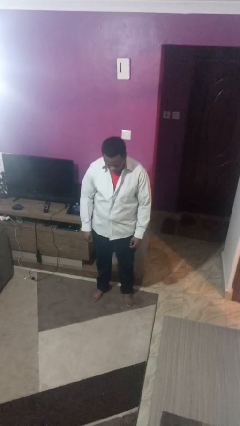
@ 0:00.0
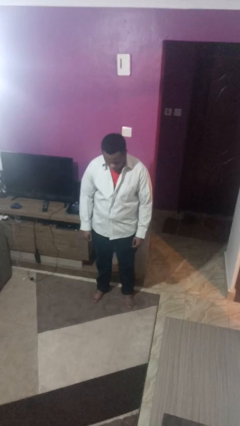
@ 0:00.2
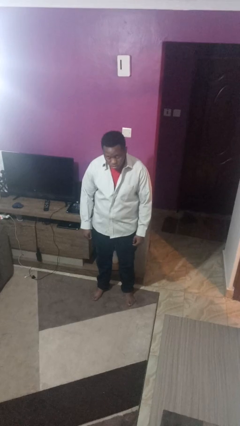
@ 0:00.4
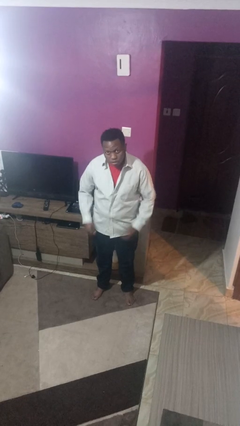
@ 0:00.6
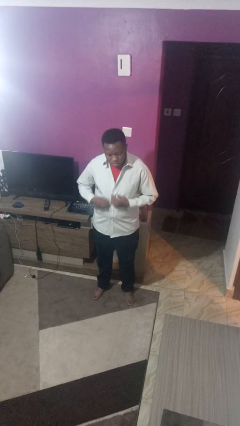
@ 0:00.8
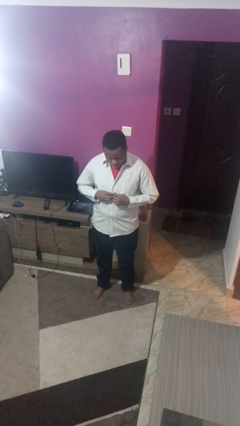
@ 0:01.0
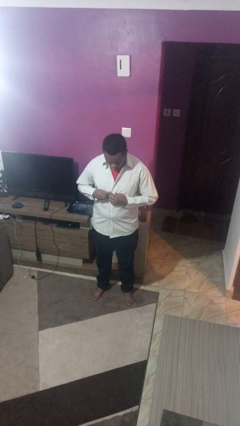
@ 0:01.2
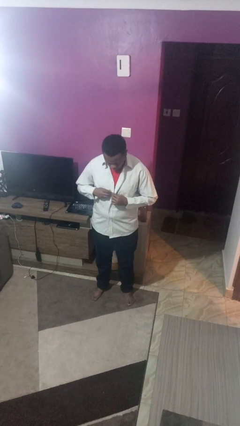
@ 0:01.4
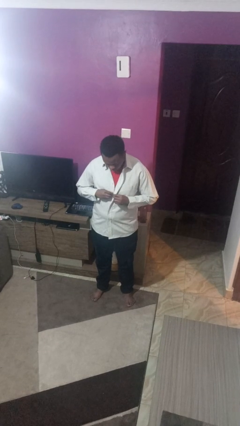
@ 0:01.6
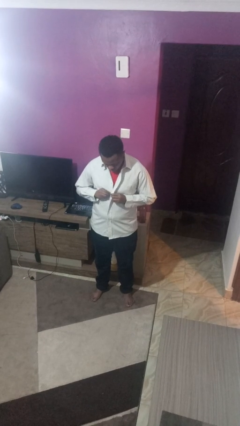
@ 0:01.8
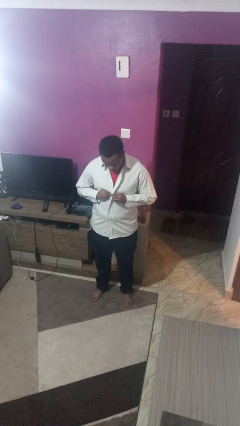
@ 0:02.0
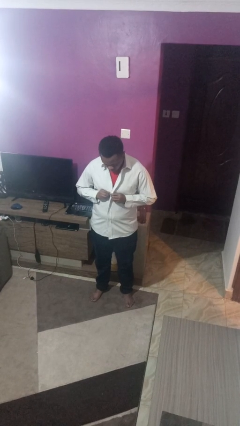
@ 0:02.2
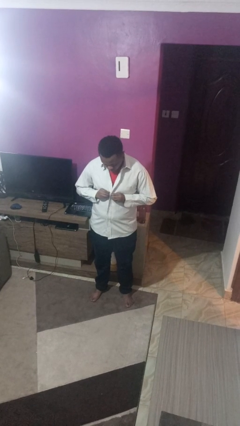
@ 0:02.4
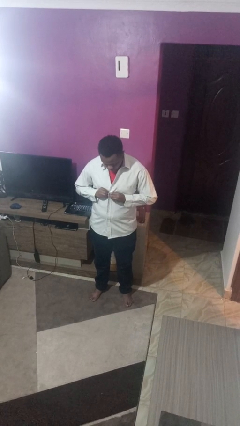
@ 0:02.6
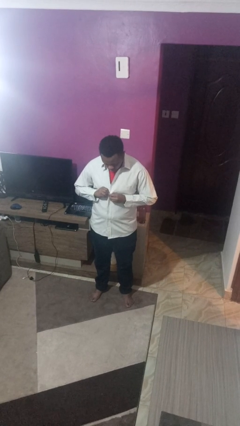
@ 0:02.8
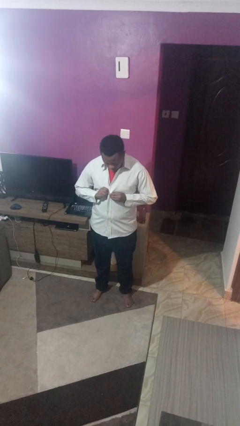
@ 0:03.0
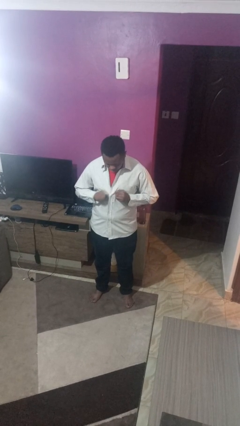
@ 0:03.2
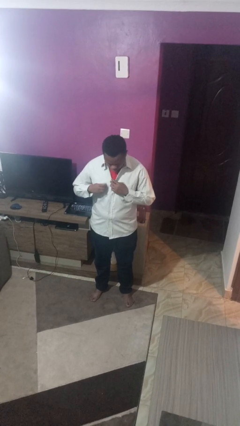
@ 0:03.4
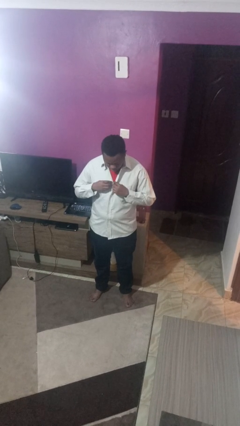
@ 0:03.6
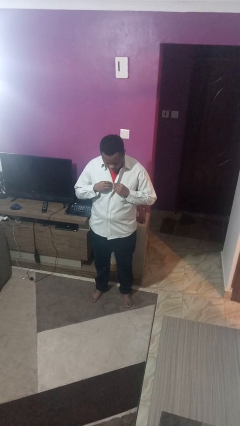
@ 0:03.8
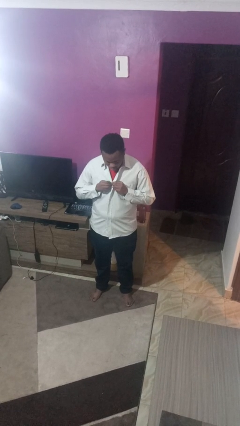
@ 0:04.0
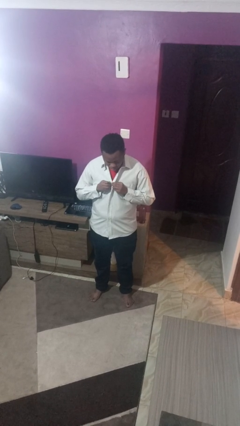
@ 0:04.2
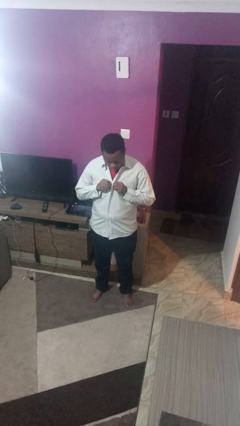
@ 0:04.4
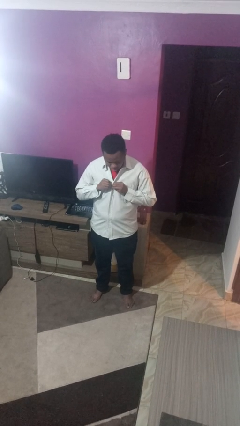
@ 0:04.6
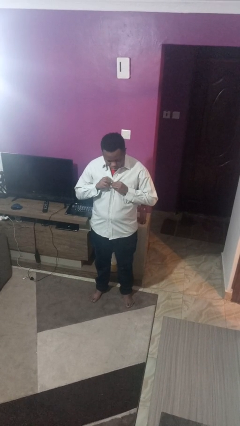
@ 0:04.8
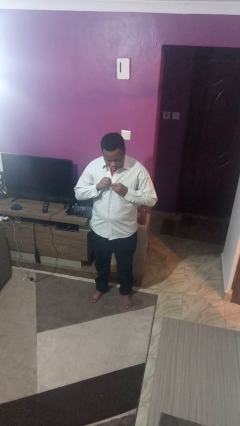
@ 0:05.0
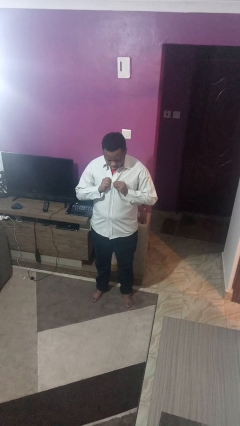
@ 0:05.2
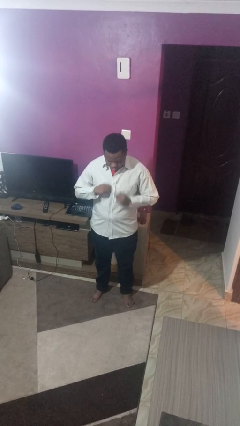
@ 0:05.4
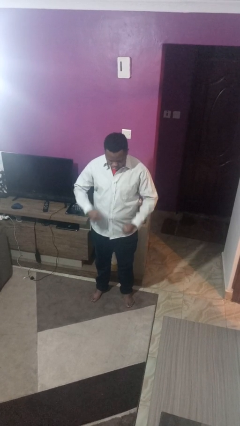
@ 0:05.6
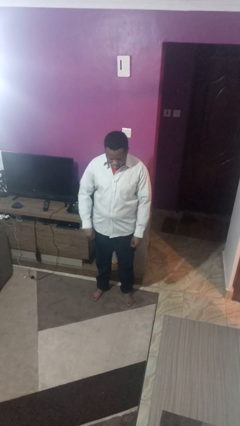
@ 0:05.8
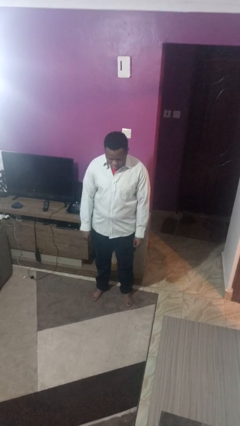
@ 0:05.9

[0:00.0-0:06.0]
person buttons shirt

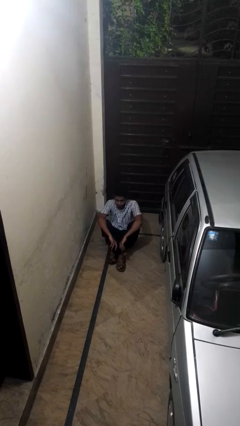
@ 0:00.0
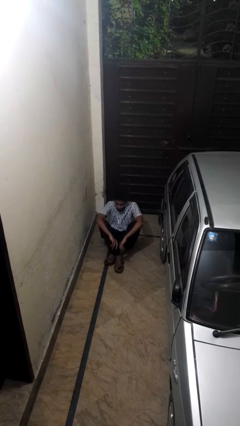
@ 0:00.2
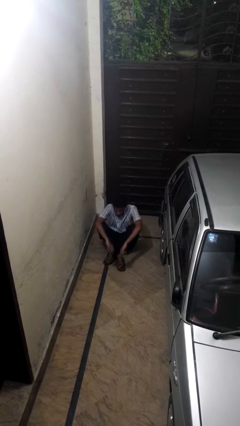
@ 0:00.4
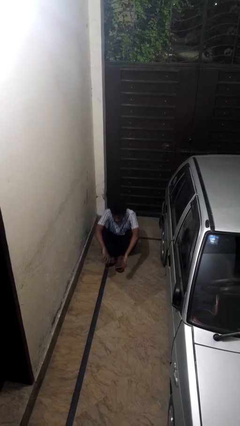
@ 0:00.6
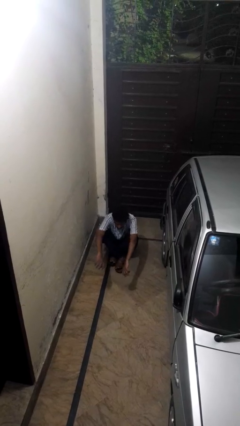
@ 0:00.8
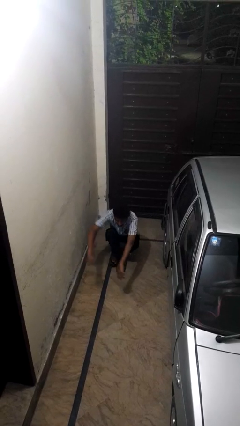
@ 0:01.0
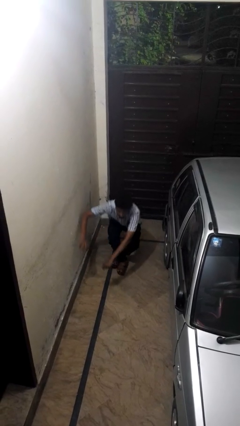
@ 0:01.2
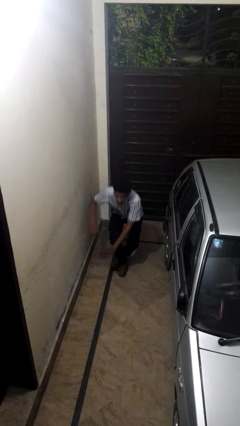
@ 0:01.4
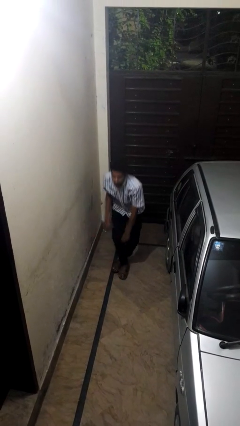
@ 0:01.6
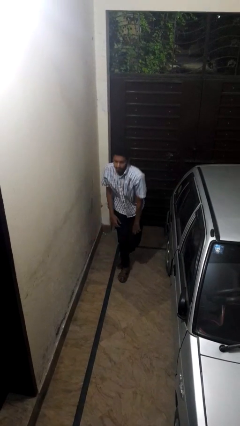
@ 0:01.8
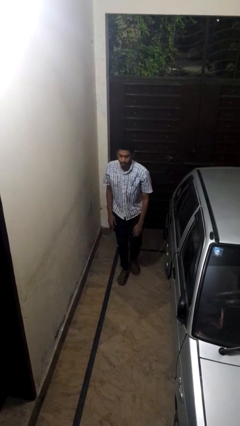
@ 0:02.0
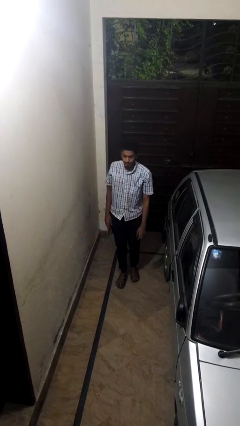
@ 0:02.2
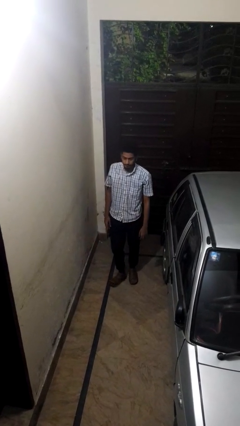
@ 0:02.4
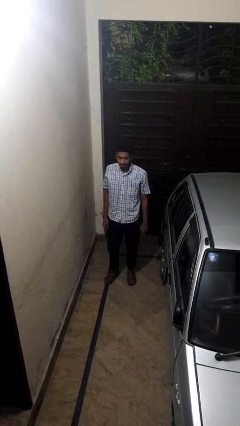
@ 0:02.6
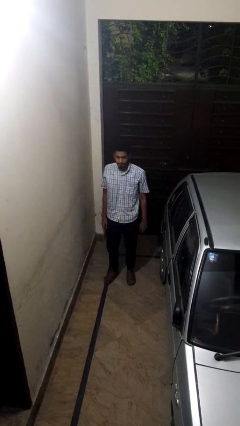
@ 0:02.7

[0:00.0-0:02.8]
person stands up from floor

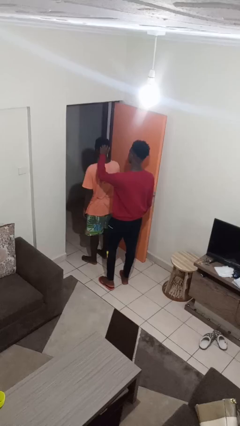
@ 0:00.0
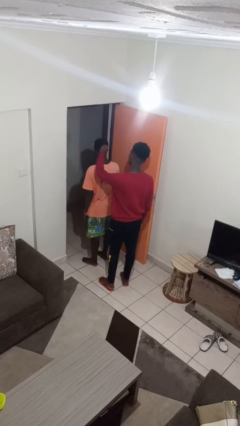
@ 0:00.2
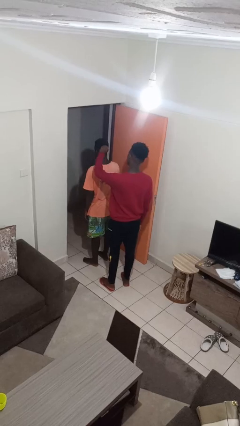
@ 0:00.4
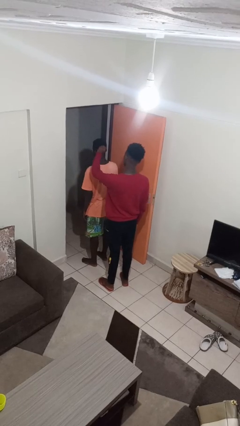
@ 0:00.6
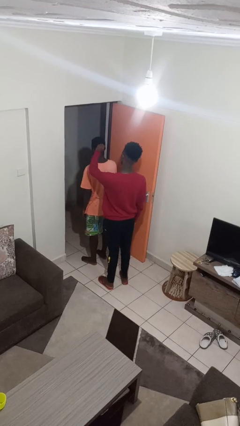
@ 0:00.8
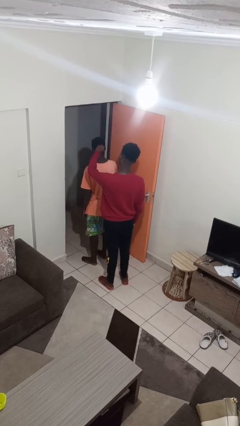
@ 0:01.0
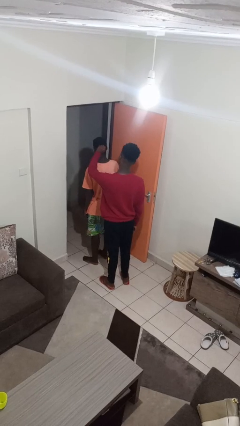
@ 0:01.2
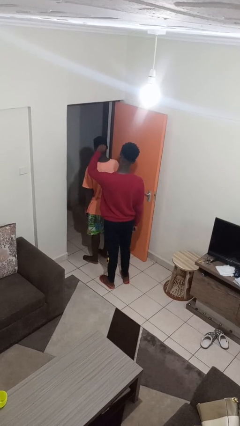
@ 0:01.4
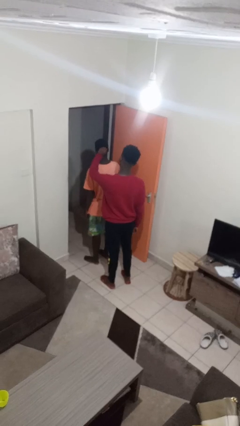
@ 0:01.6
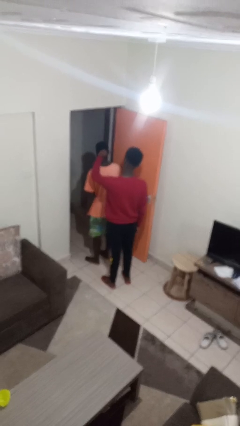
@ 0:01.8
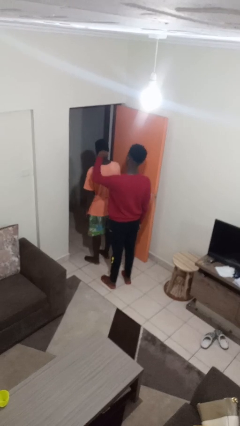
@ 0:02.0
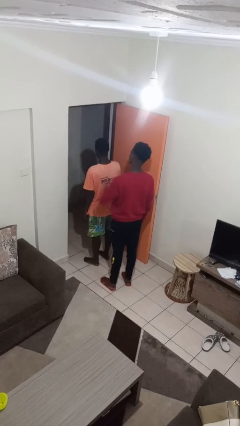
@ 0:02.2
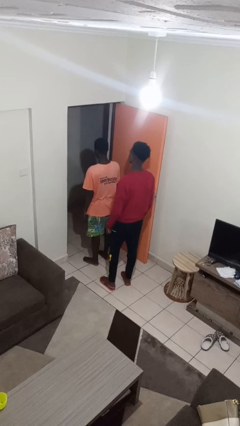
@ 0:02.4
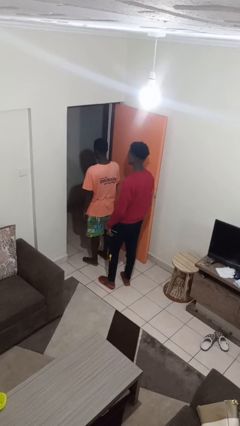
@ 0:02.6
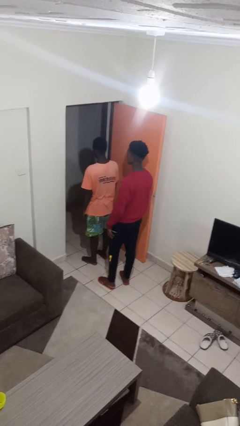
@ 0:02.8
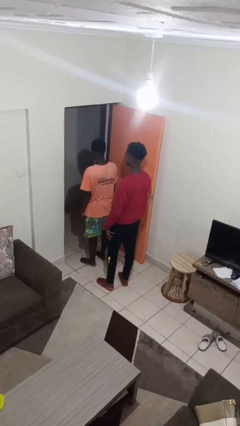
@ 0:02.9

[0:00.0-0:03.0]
person grabs person by hair

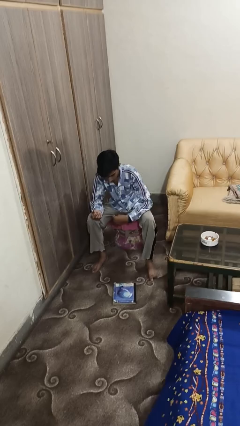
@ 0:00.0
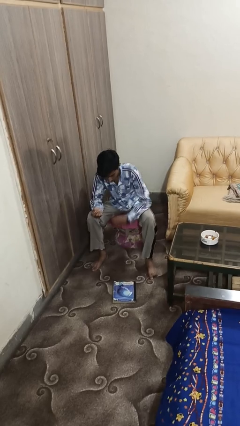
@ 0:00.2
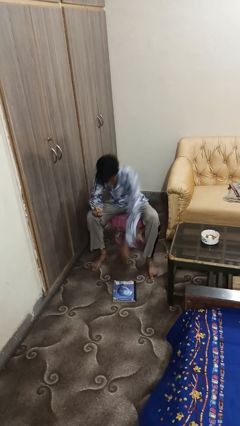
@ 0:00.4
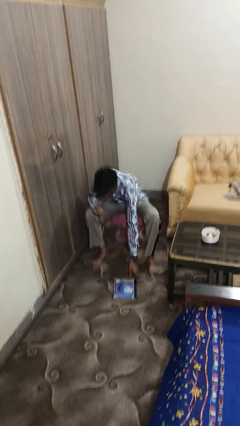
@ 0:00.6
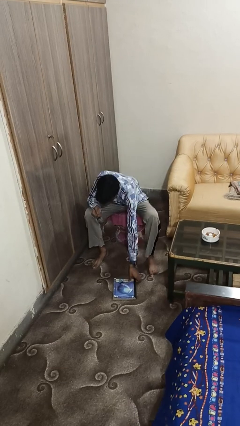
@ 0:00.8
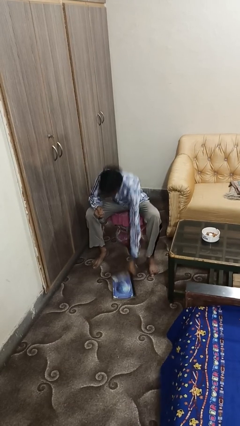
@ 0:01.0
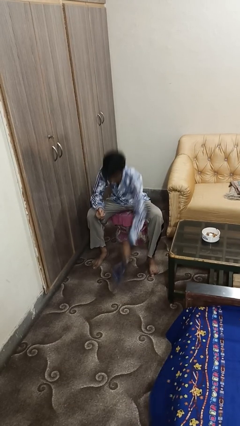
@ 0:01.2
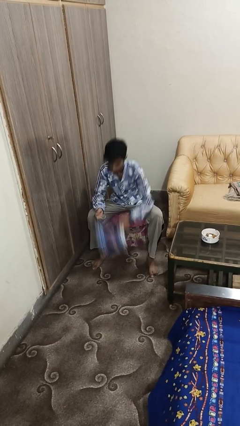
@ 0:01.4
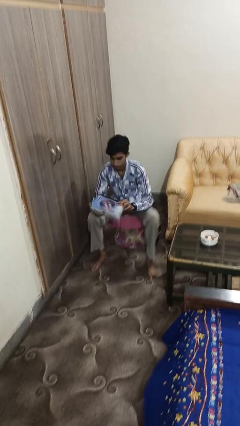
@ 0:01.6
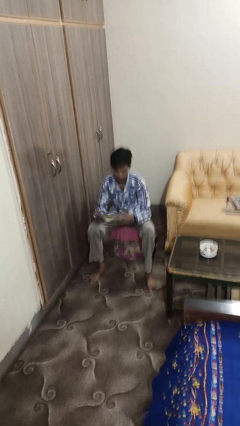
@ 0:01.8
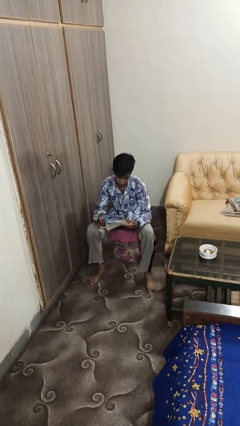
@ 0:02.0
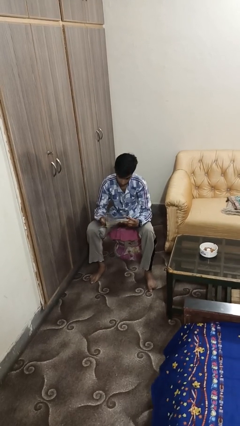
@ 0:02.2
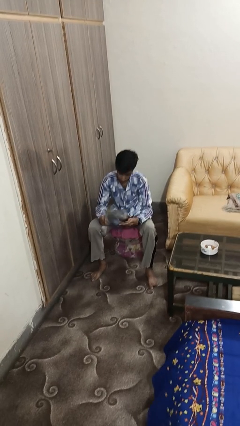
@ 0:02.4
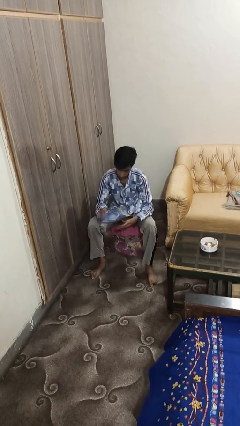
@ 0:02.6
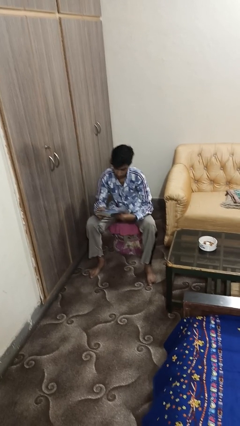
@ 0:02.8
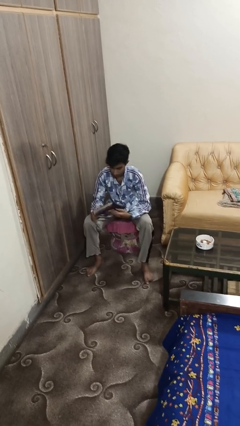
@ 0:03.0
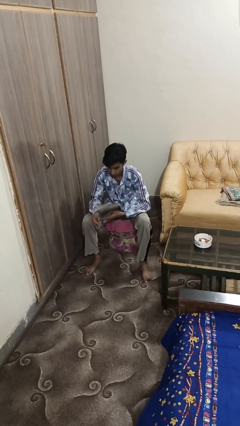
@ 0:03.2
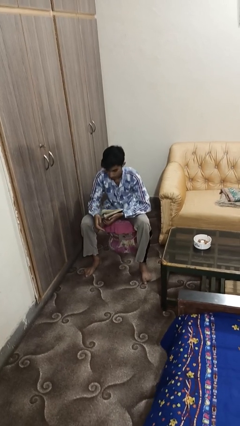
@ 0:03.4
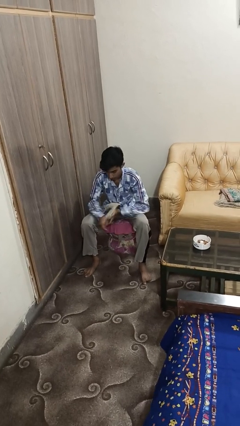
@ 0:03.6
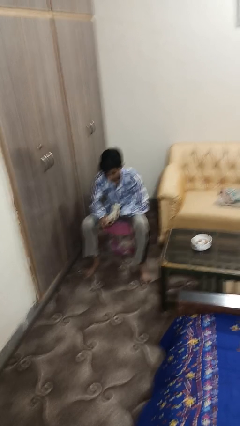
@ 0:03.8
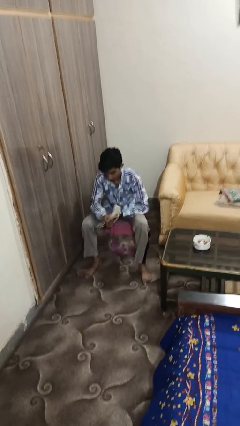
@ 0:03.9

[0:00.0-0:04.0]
person picks up object from floor

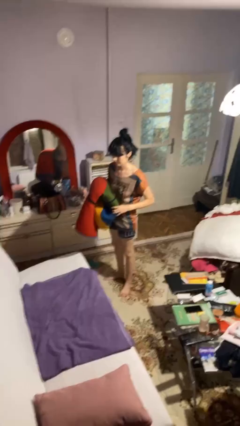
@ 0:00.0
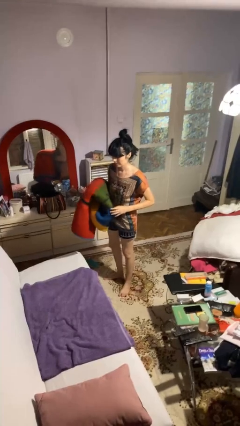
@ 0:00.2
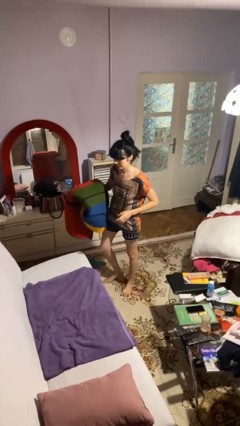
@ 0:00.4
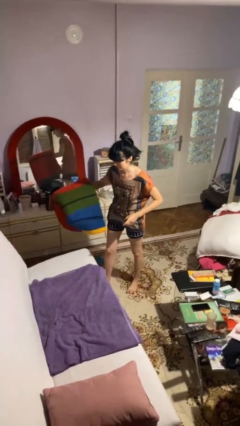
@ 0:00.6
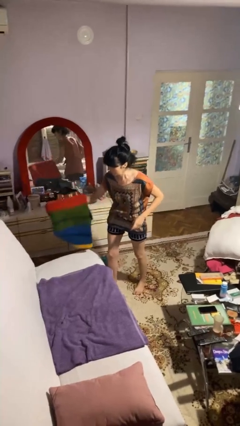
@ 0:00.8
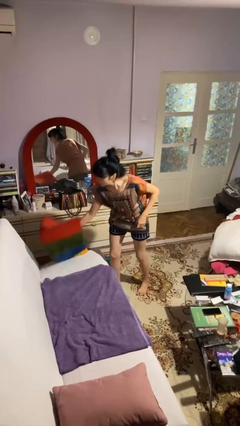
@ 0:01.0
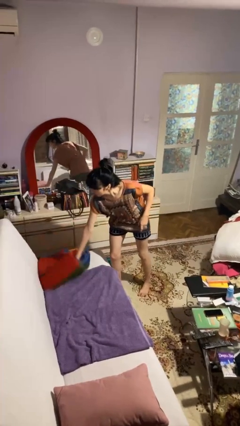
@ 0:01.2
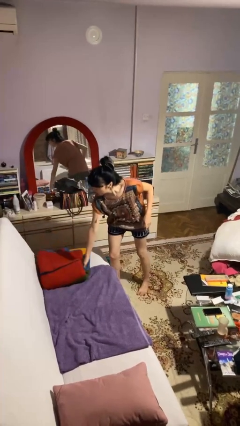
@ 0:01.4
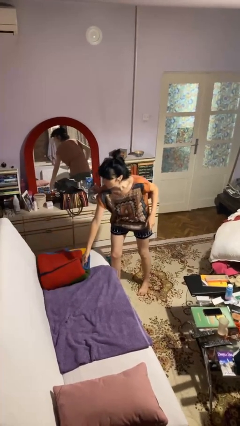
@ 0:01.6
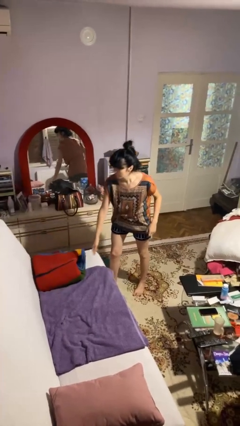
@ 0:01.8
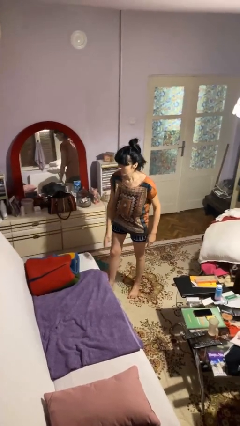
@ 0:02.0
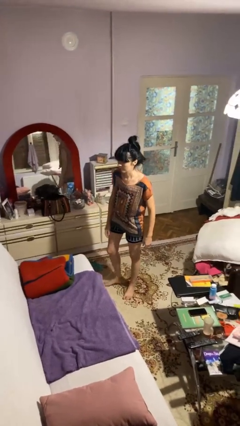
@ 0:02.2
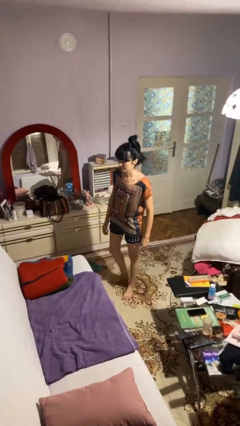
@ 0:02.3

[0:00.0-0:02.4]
person puts down object on couch
